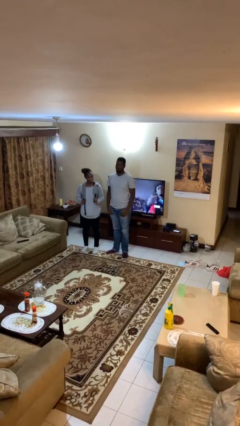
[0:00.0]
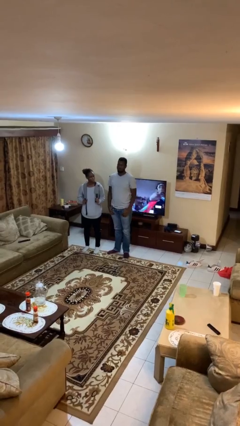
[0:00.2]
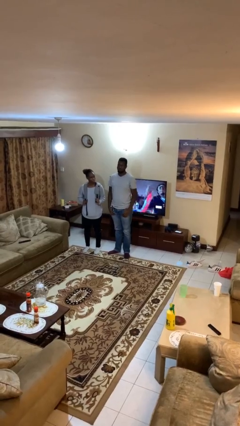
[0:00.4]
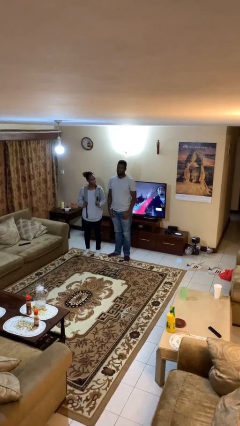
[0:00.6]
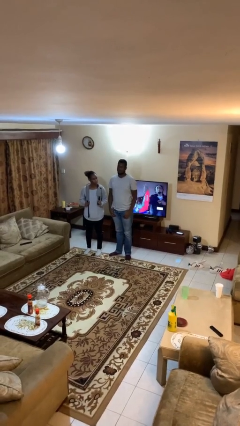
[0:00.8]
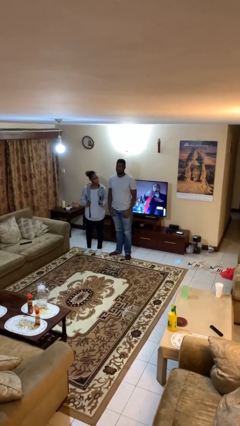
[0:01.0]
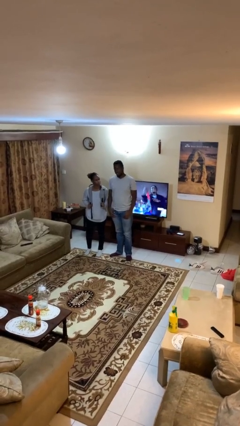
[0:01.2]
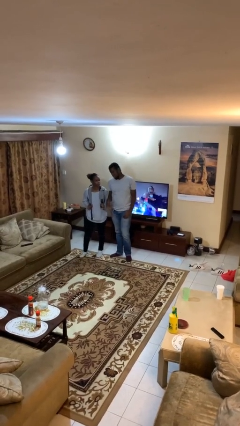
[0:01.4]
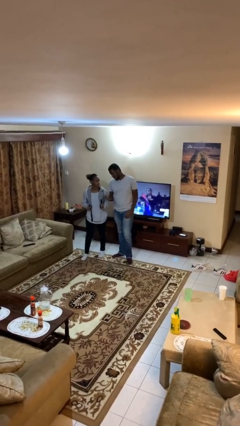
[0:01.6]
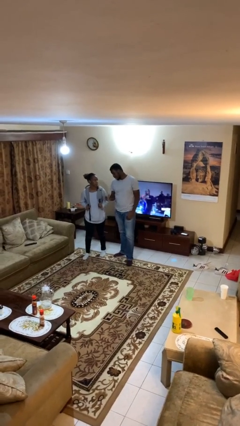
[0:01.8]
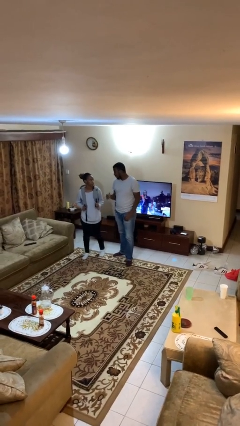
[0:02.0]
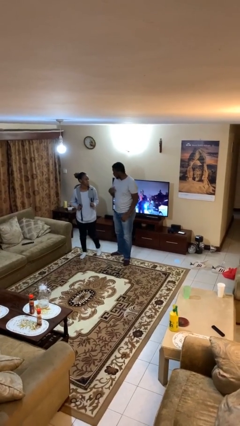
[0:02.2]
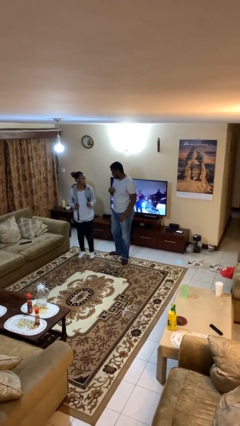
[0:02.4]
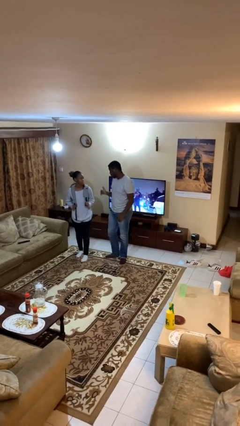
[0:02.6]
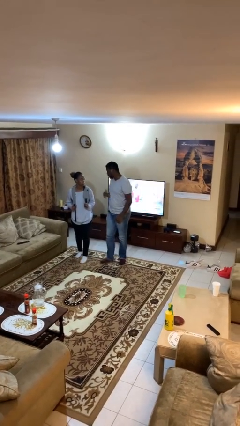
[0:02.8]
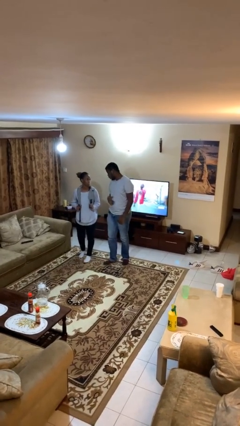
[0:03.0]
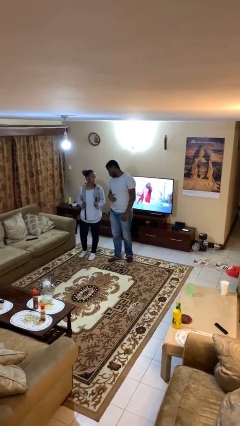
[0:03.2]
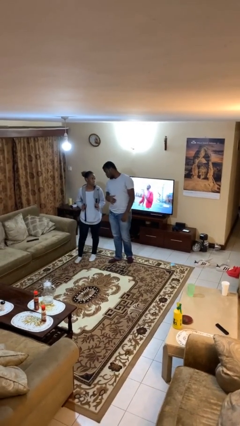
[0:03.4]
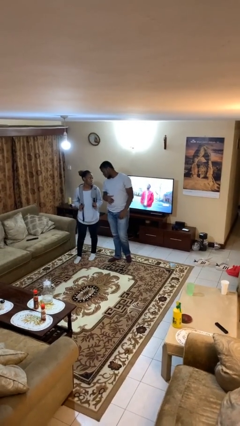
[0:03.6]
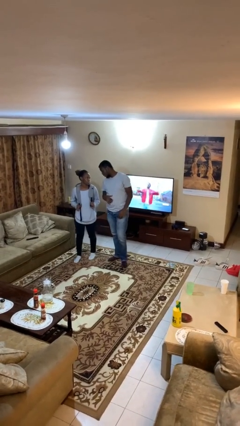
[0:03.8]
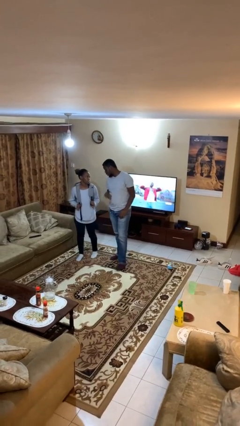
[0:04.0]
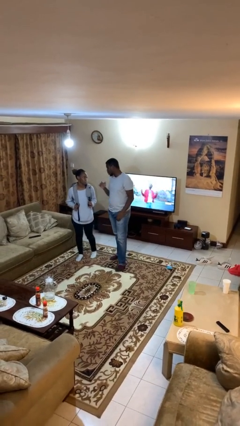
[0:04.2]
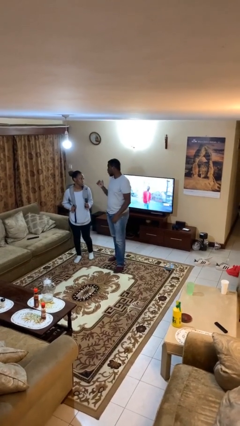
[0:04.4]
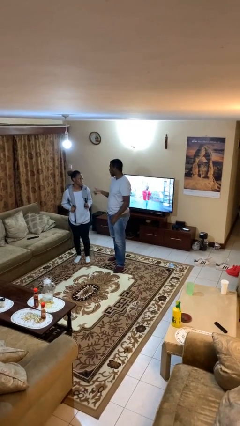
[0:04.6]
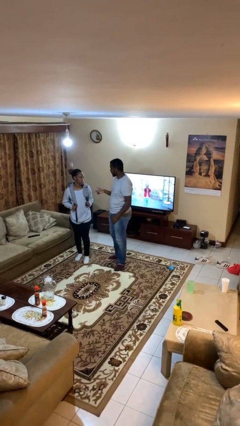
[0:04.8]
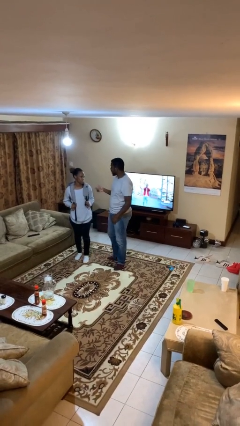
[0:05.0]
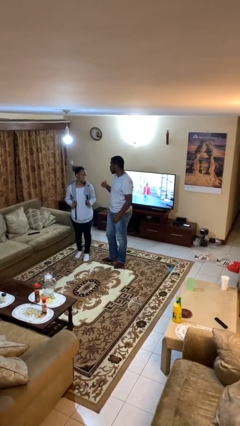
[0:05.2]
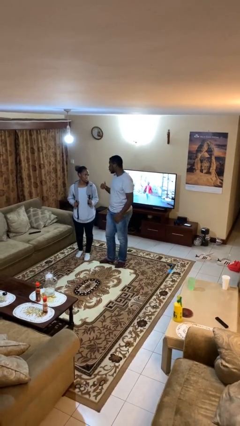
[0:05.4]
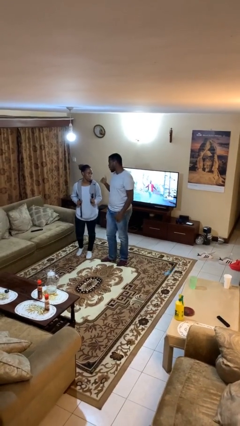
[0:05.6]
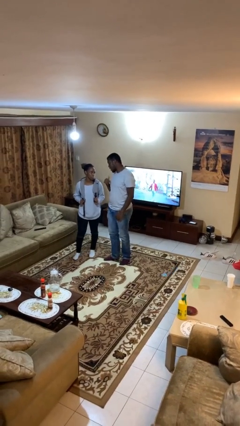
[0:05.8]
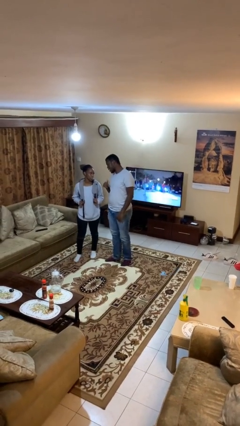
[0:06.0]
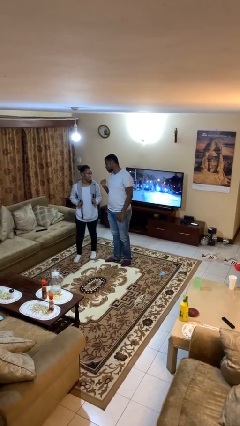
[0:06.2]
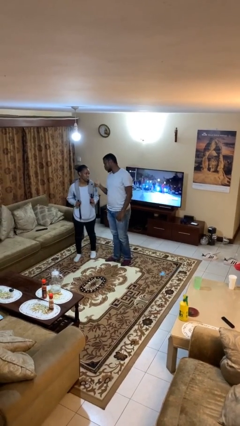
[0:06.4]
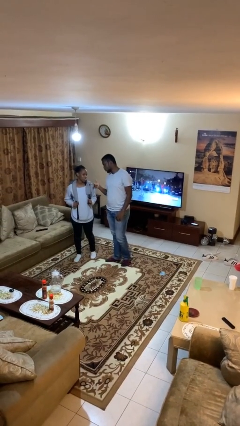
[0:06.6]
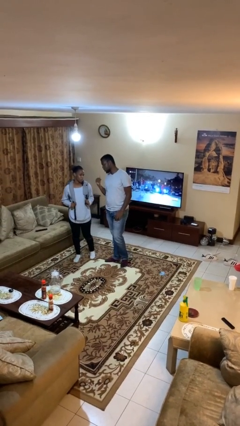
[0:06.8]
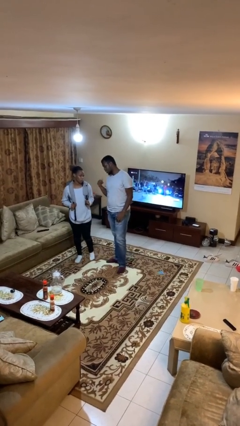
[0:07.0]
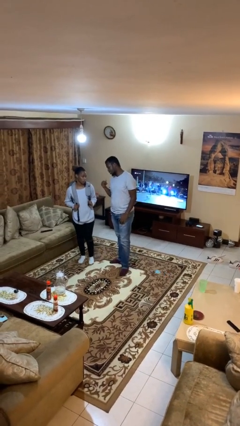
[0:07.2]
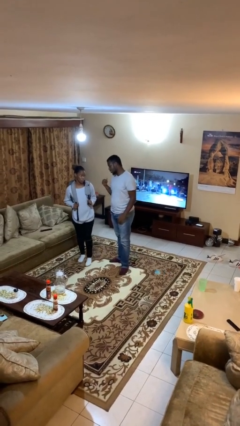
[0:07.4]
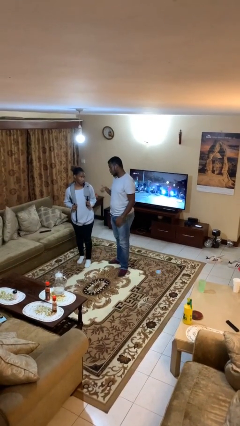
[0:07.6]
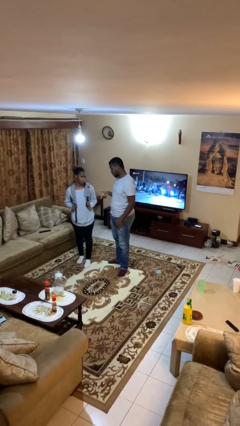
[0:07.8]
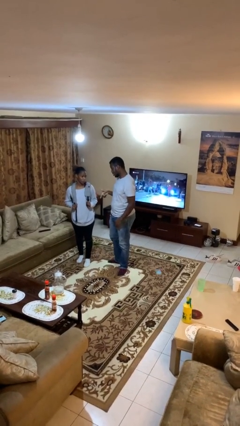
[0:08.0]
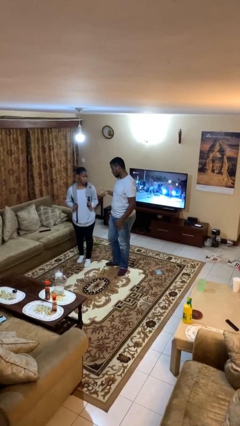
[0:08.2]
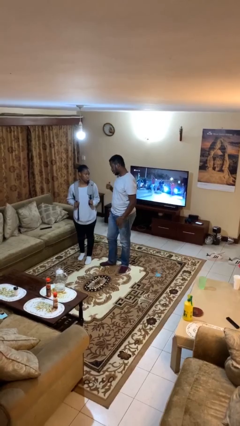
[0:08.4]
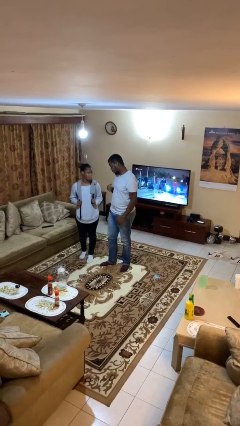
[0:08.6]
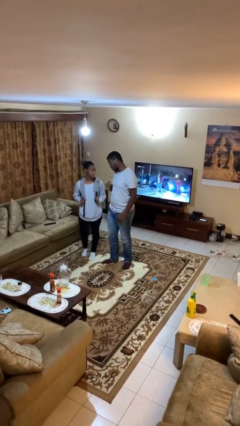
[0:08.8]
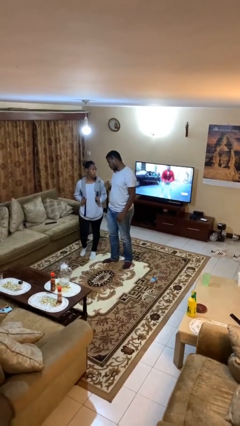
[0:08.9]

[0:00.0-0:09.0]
person talks to person

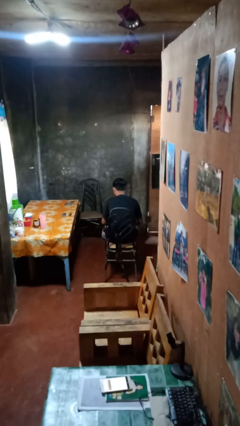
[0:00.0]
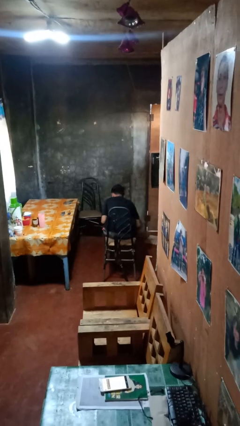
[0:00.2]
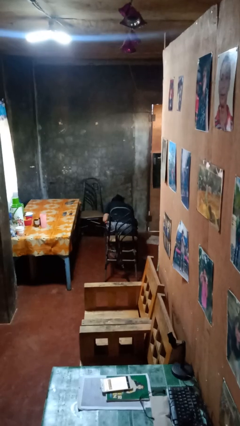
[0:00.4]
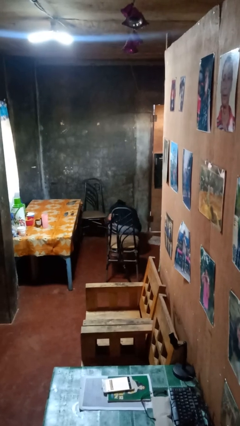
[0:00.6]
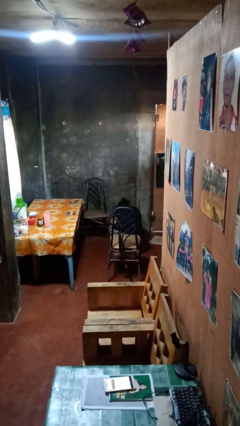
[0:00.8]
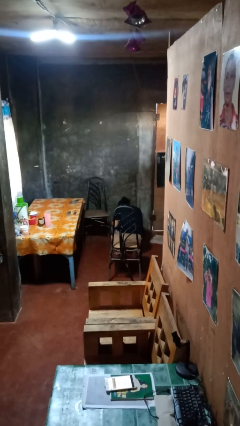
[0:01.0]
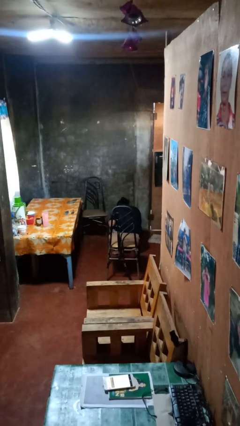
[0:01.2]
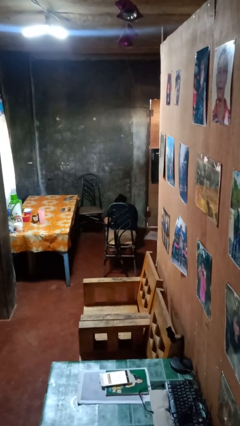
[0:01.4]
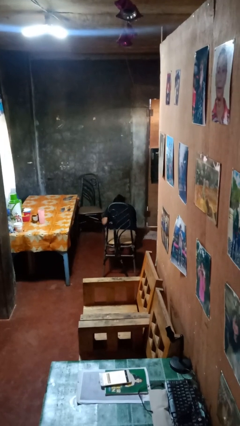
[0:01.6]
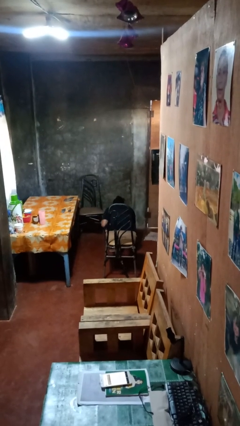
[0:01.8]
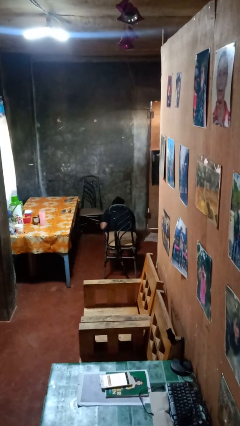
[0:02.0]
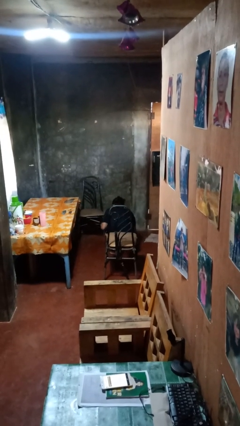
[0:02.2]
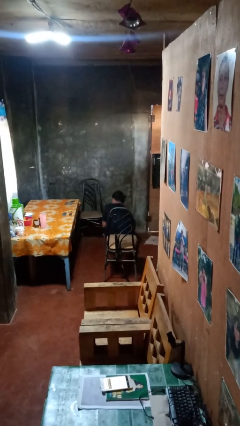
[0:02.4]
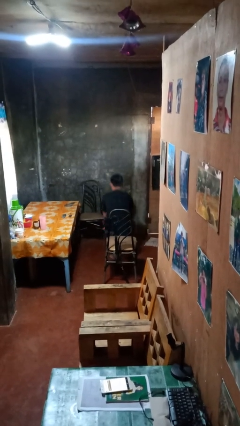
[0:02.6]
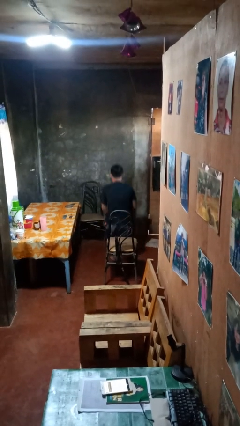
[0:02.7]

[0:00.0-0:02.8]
person falls from chair

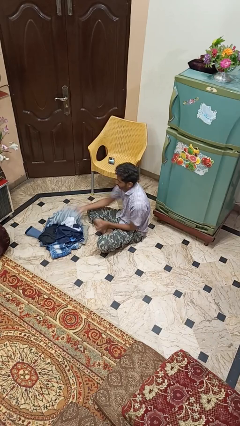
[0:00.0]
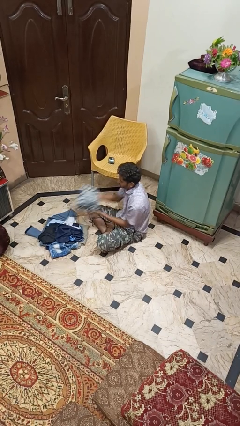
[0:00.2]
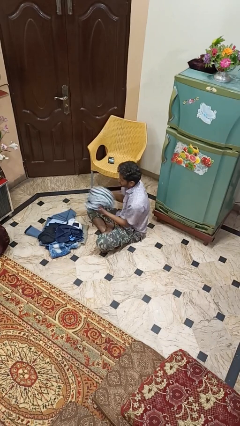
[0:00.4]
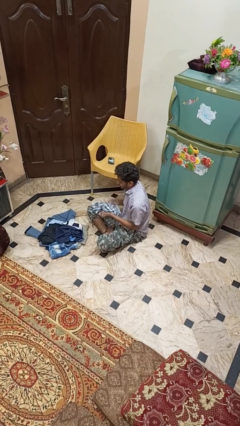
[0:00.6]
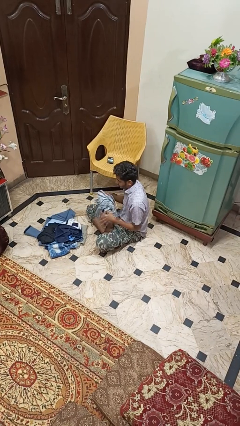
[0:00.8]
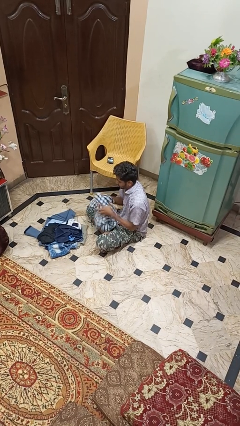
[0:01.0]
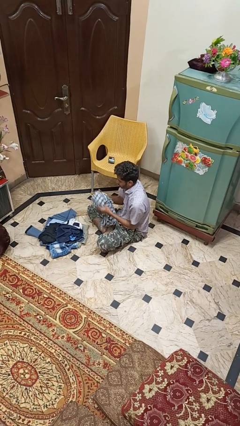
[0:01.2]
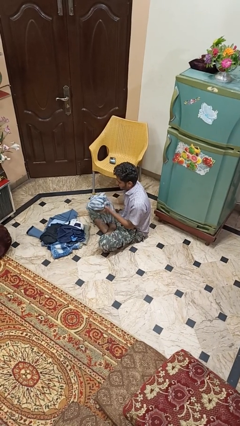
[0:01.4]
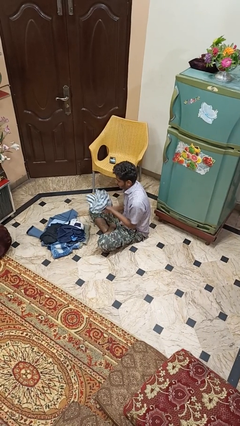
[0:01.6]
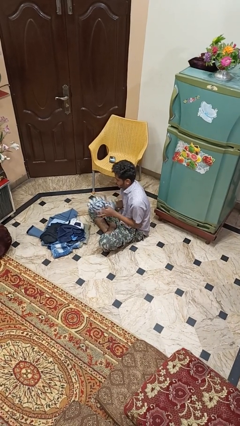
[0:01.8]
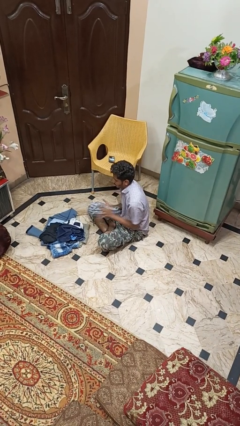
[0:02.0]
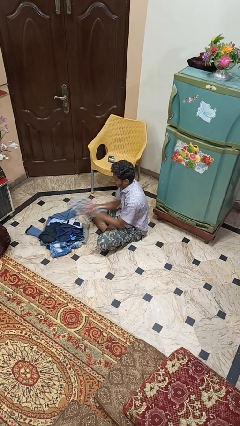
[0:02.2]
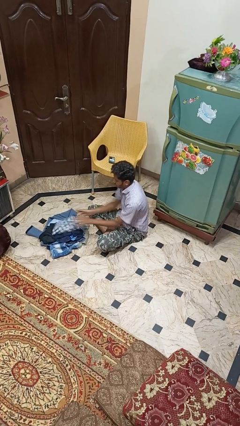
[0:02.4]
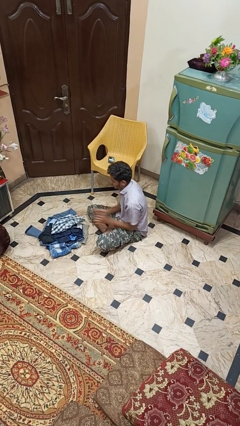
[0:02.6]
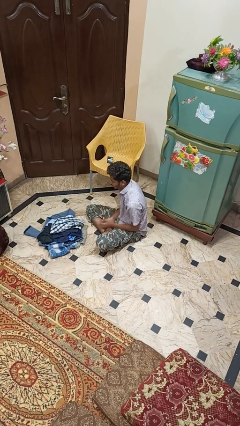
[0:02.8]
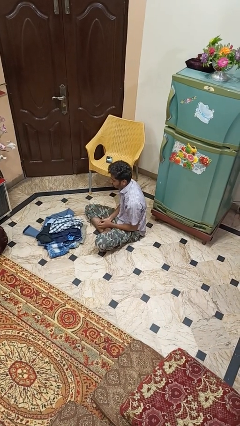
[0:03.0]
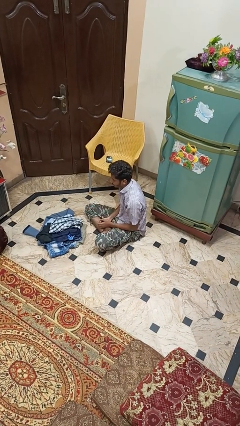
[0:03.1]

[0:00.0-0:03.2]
person folds shirt

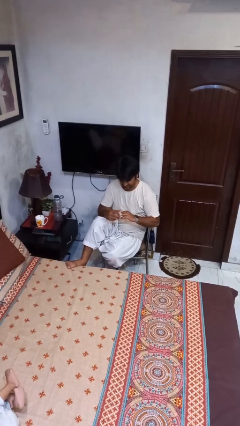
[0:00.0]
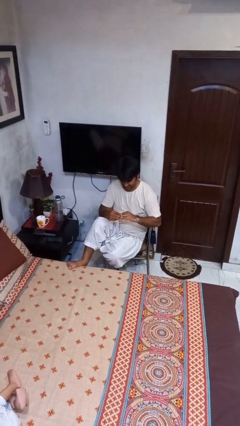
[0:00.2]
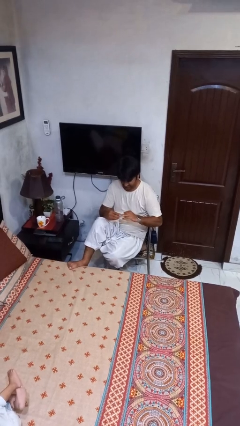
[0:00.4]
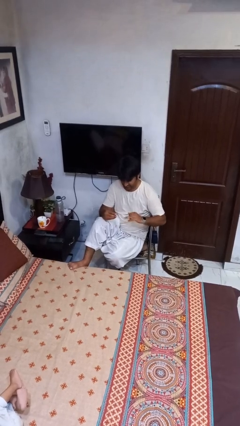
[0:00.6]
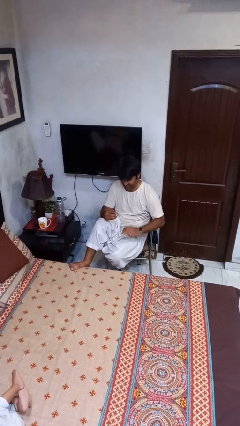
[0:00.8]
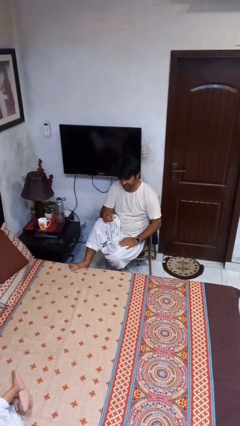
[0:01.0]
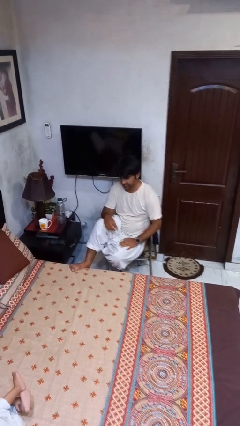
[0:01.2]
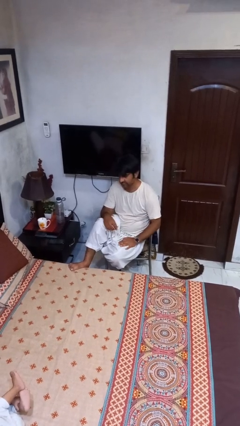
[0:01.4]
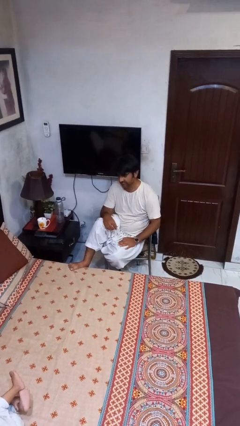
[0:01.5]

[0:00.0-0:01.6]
person takes off ring

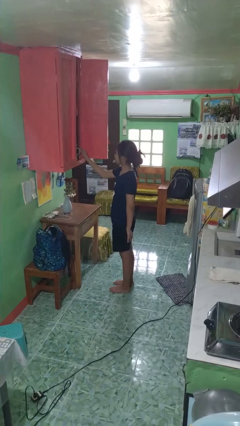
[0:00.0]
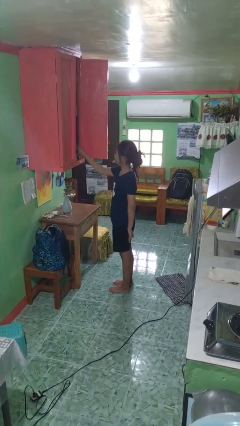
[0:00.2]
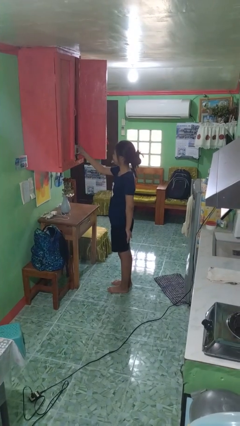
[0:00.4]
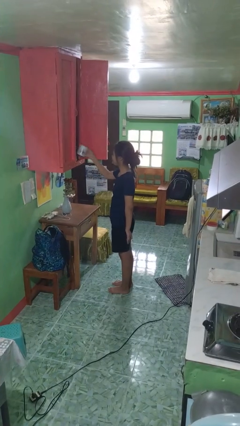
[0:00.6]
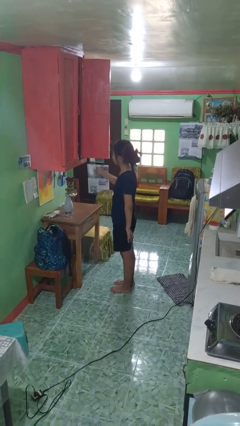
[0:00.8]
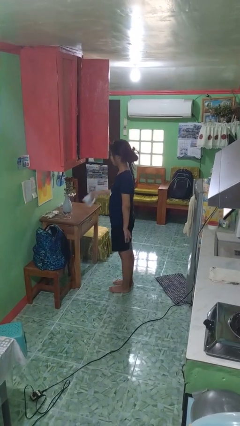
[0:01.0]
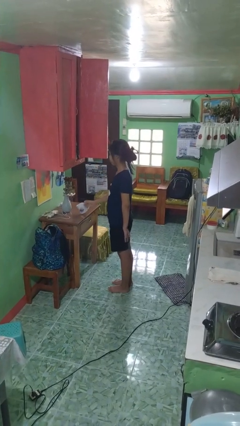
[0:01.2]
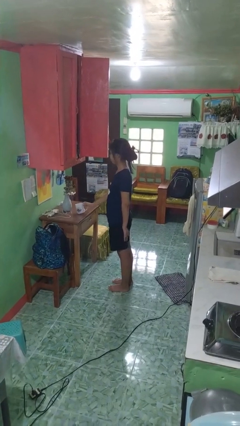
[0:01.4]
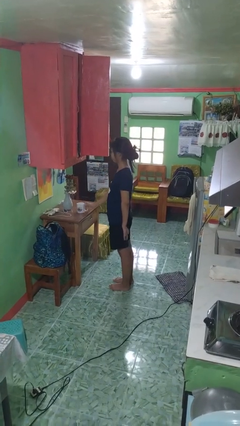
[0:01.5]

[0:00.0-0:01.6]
person takes object from cabinet
